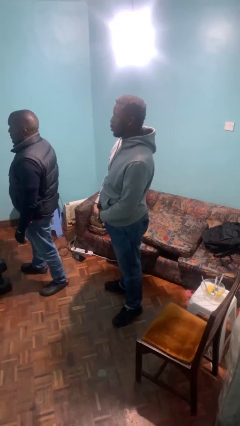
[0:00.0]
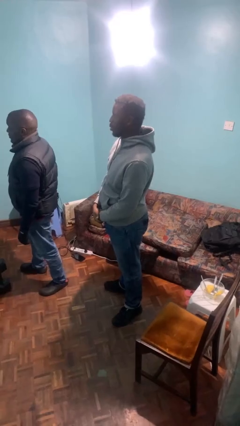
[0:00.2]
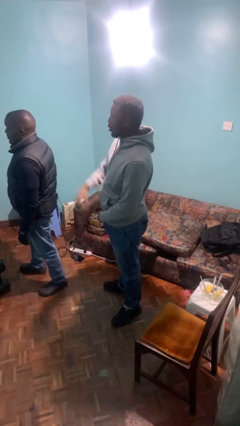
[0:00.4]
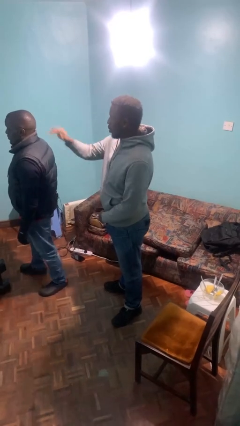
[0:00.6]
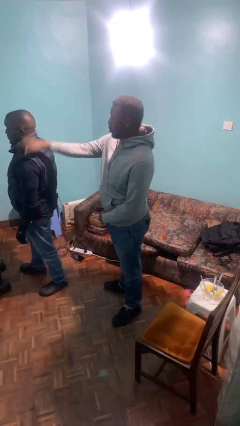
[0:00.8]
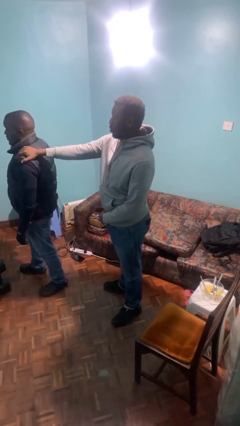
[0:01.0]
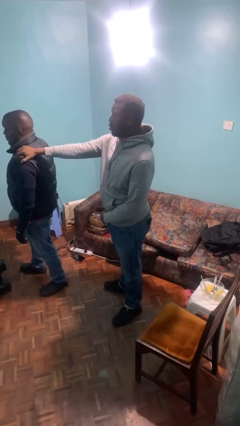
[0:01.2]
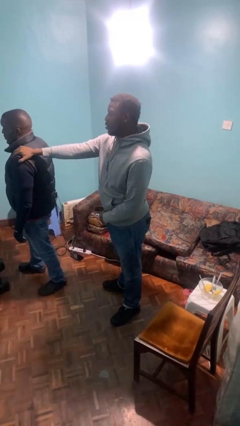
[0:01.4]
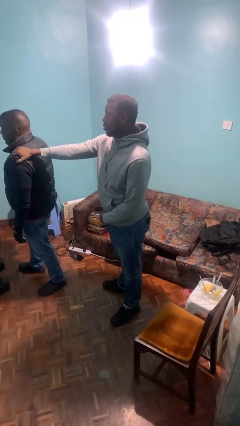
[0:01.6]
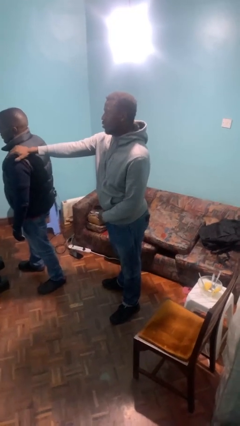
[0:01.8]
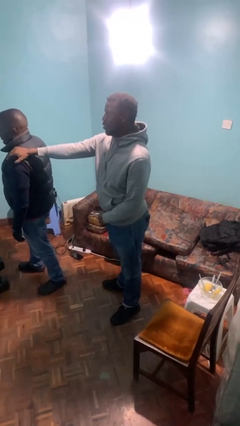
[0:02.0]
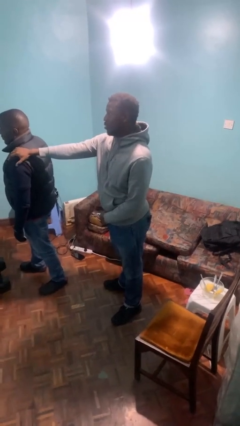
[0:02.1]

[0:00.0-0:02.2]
person grabs person by shoulder

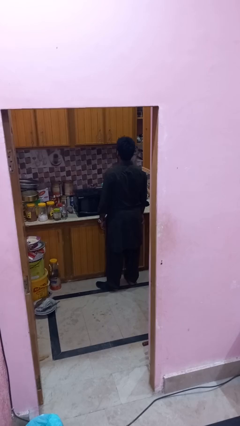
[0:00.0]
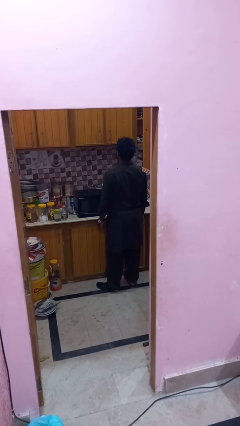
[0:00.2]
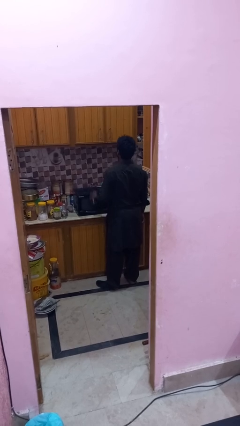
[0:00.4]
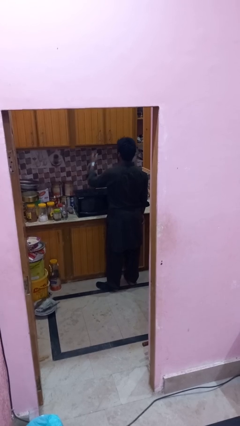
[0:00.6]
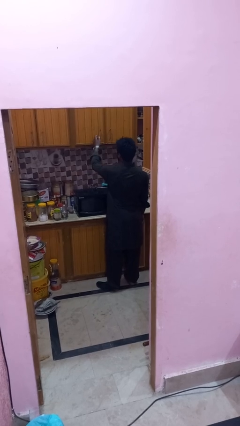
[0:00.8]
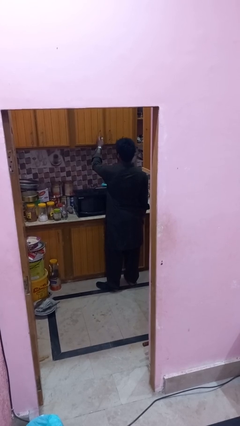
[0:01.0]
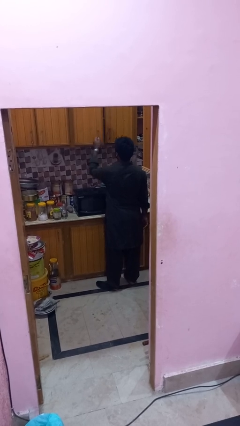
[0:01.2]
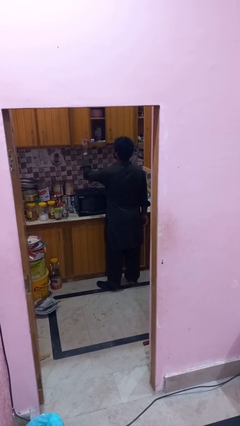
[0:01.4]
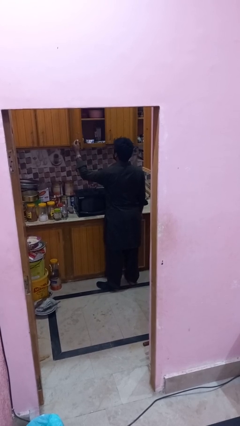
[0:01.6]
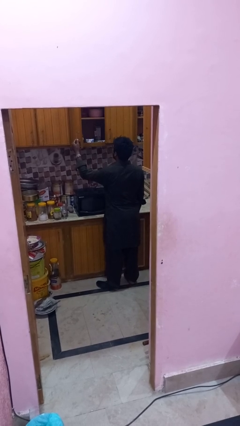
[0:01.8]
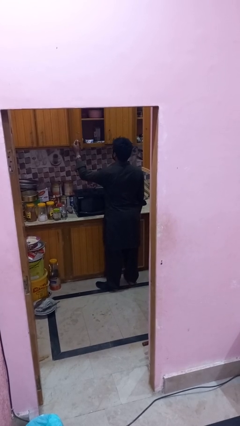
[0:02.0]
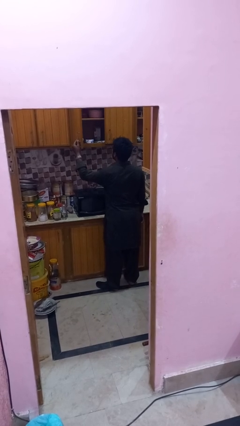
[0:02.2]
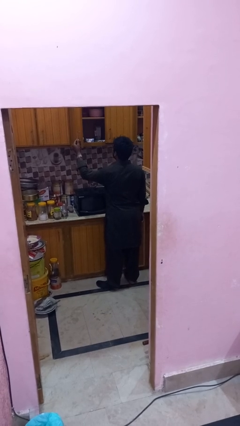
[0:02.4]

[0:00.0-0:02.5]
person opens cabinet

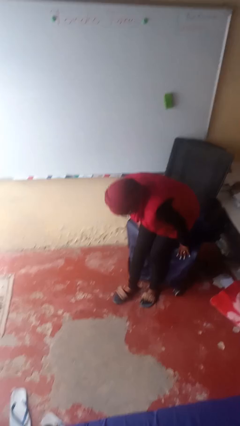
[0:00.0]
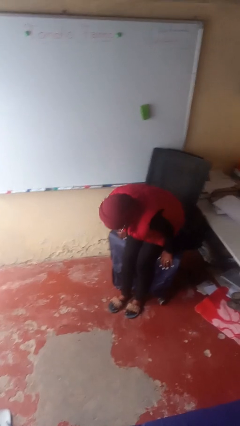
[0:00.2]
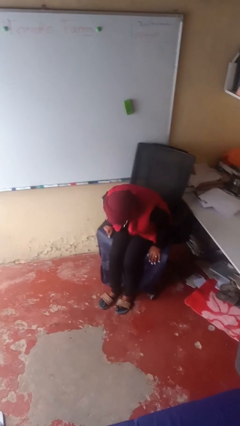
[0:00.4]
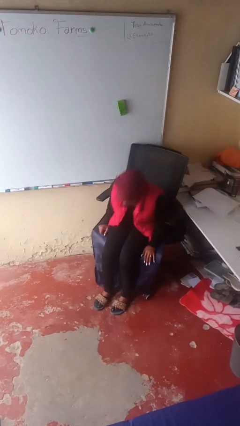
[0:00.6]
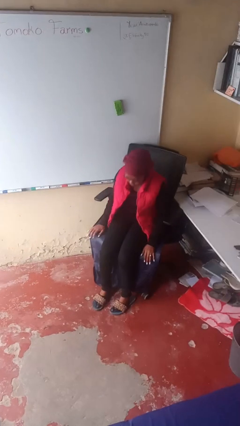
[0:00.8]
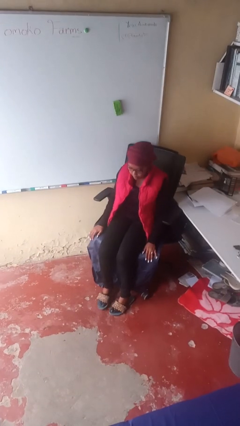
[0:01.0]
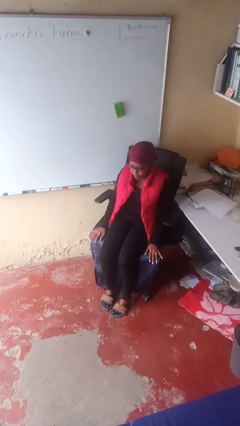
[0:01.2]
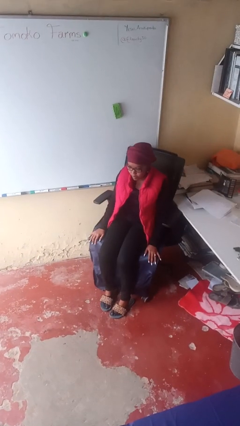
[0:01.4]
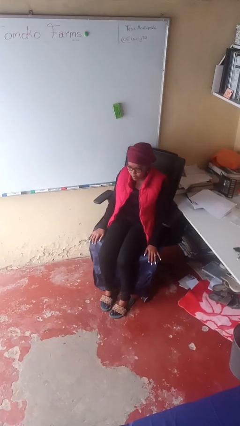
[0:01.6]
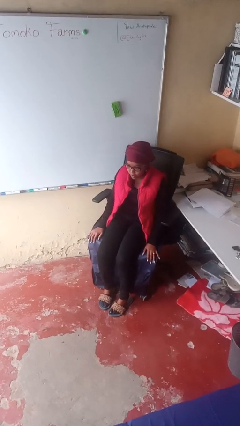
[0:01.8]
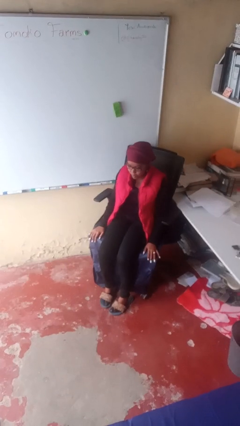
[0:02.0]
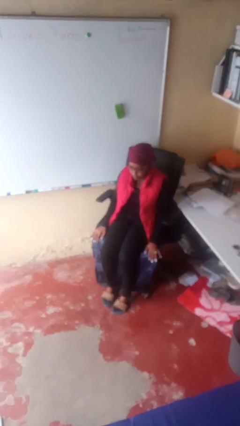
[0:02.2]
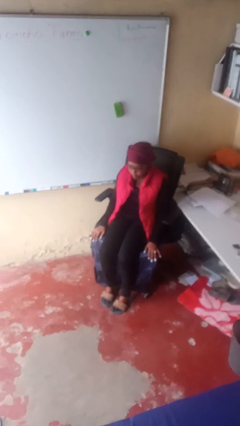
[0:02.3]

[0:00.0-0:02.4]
person sits down

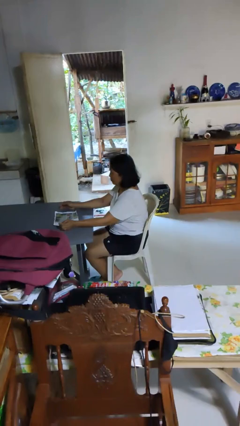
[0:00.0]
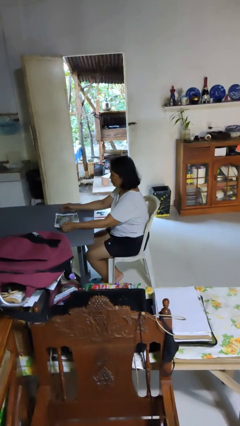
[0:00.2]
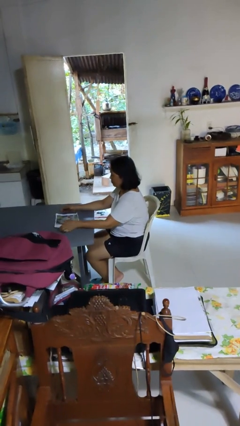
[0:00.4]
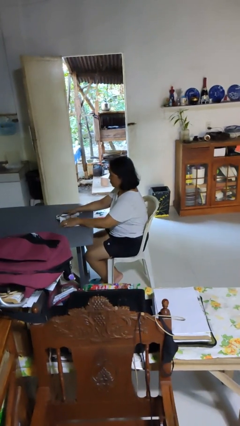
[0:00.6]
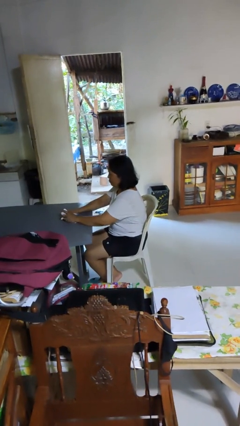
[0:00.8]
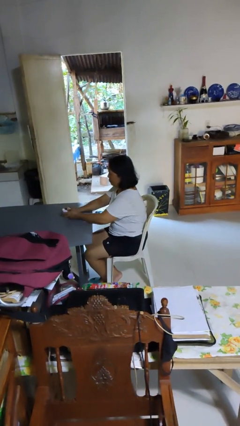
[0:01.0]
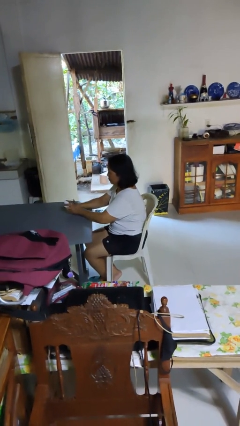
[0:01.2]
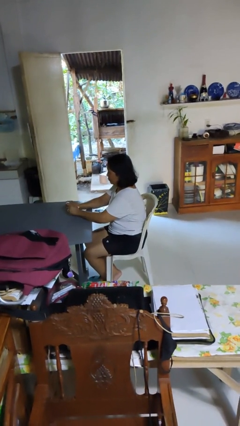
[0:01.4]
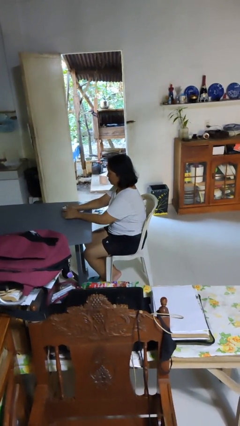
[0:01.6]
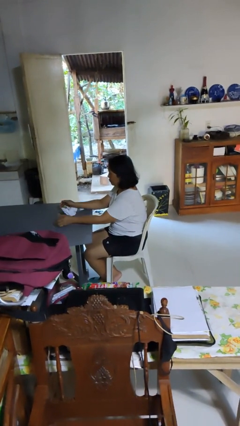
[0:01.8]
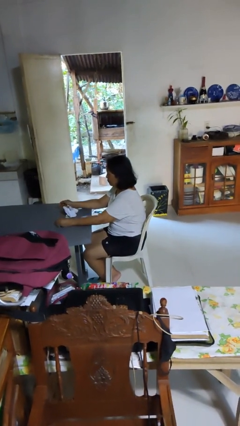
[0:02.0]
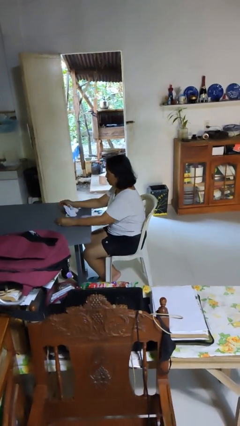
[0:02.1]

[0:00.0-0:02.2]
person crumples paper

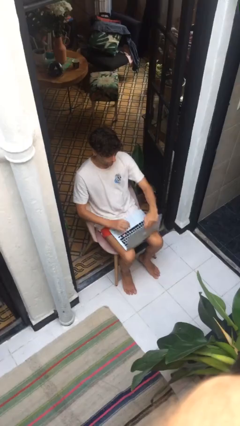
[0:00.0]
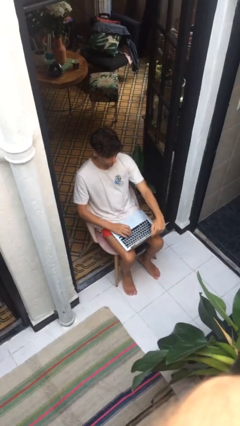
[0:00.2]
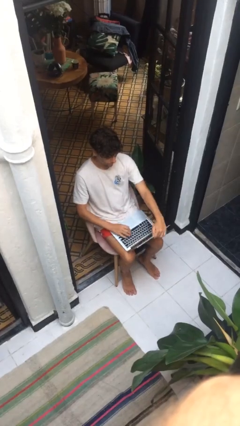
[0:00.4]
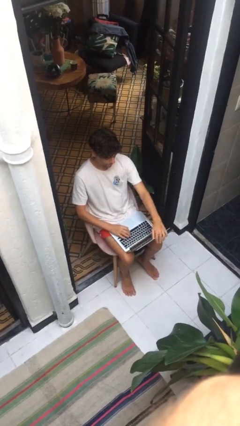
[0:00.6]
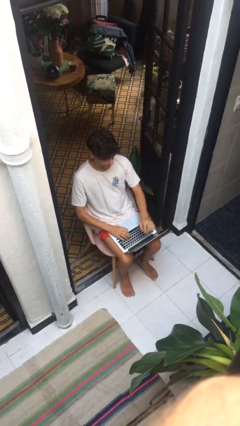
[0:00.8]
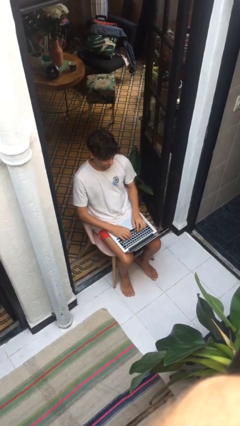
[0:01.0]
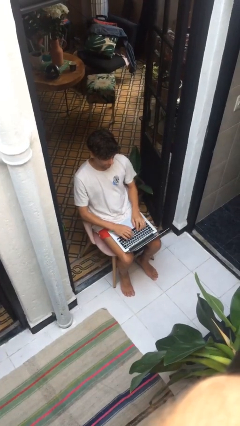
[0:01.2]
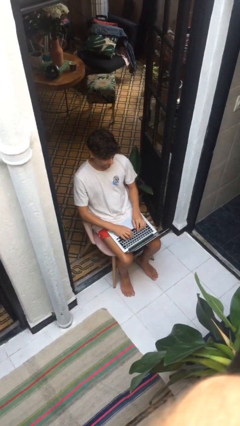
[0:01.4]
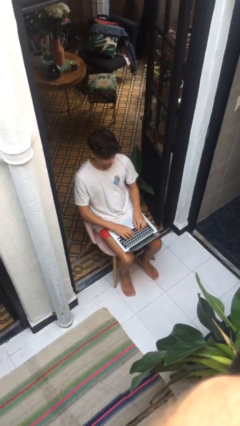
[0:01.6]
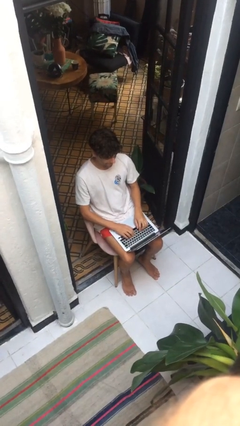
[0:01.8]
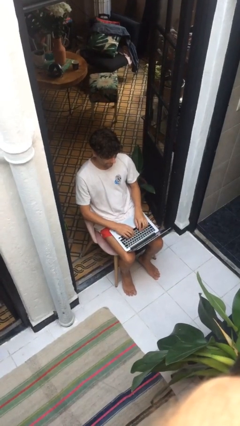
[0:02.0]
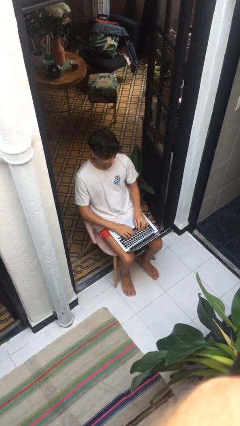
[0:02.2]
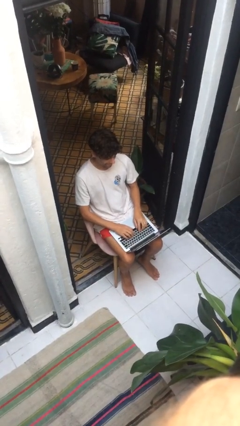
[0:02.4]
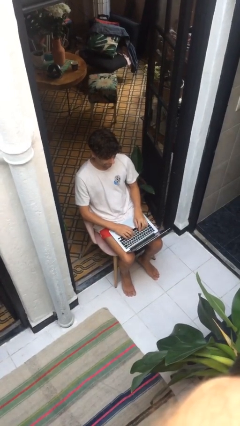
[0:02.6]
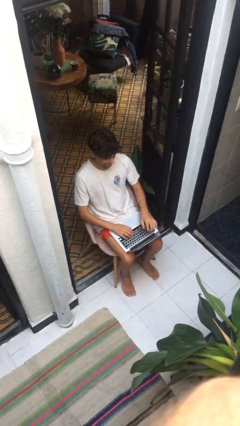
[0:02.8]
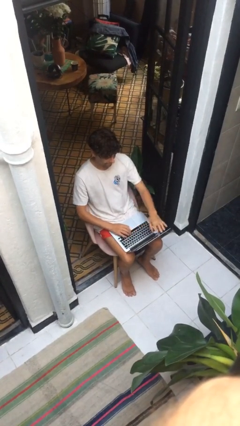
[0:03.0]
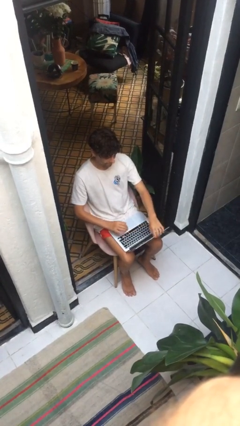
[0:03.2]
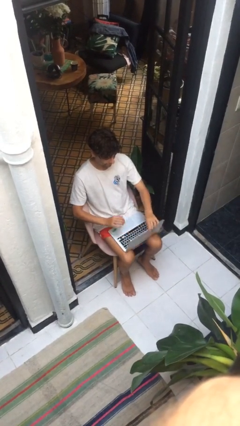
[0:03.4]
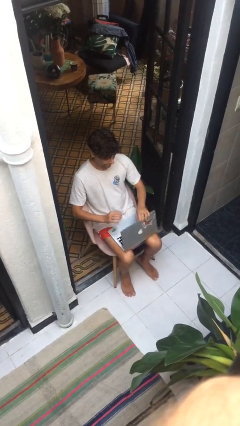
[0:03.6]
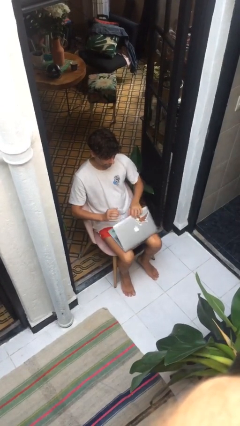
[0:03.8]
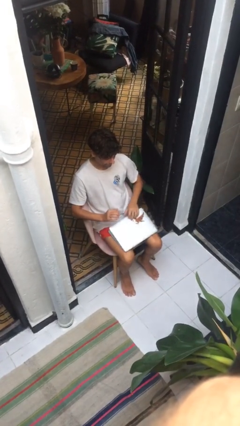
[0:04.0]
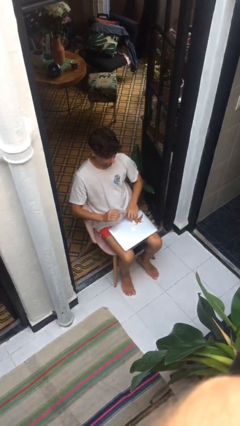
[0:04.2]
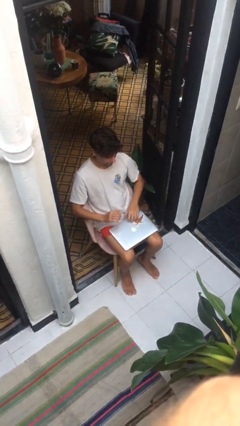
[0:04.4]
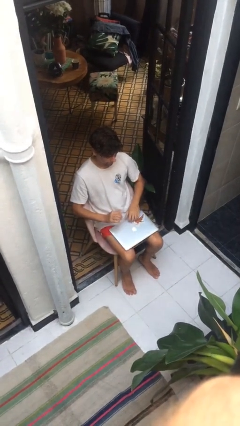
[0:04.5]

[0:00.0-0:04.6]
person interacts with laptop

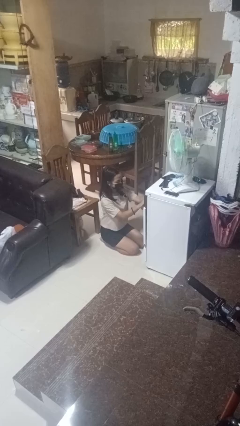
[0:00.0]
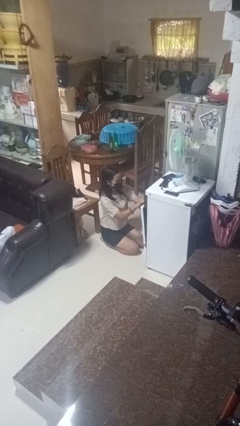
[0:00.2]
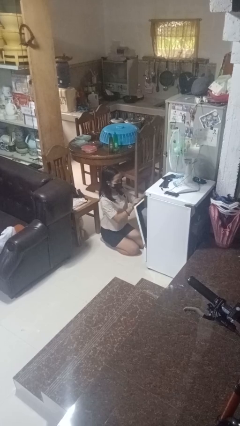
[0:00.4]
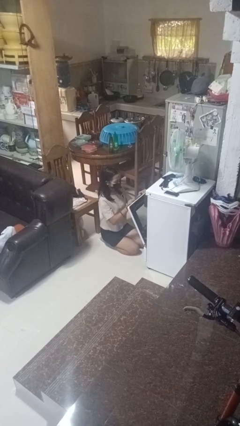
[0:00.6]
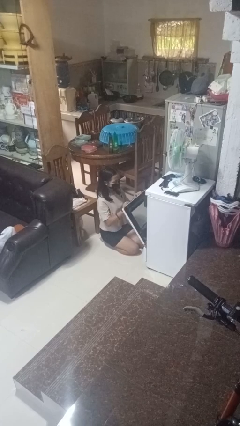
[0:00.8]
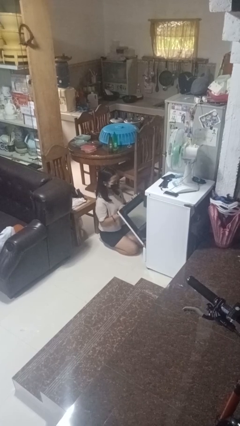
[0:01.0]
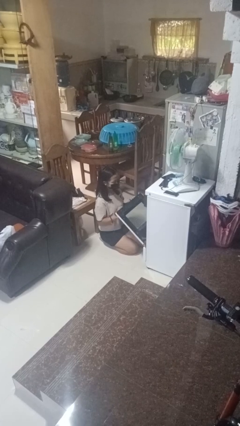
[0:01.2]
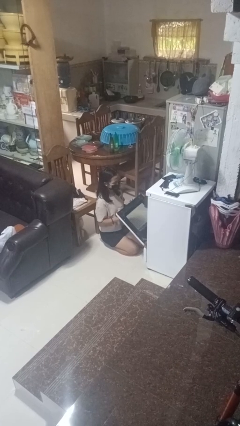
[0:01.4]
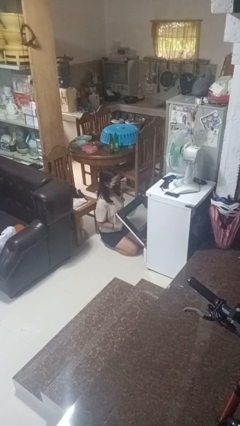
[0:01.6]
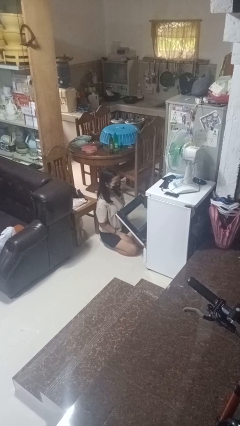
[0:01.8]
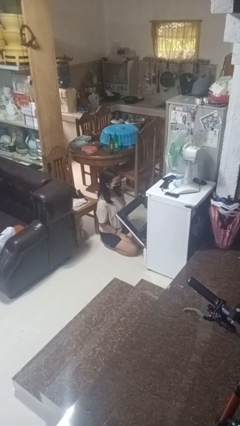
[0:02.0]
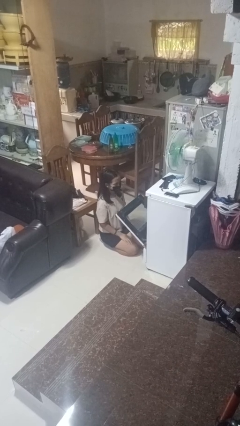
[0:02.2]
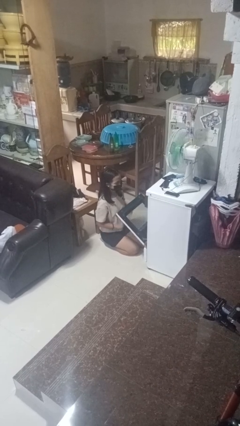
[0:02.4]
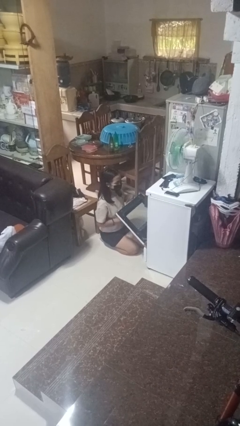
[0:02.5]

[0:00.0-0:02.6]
person opens oven door

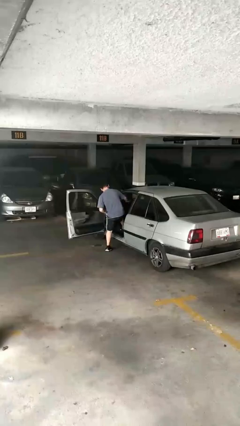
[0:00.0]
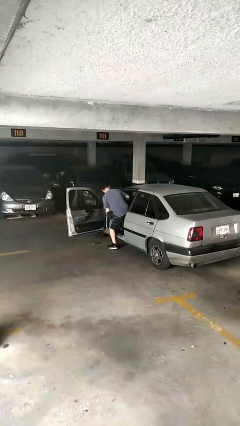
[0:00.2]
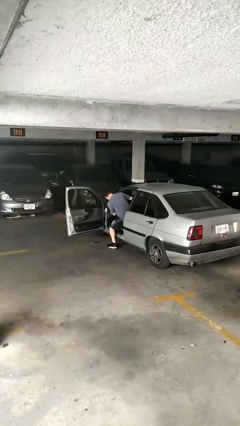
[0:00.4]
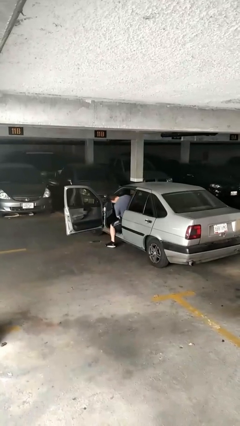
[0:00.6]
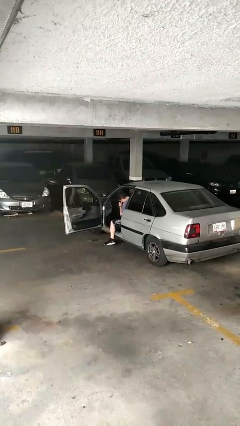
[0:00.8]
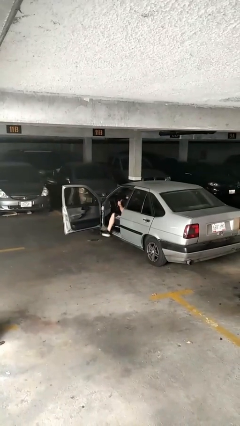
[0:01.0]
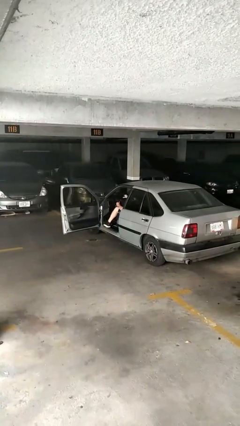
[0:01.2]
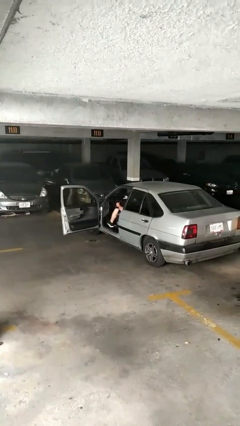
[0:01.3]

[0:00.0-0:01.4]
person enters car
